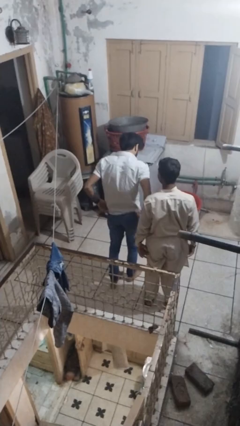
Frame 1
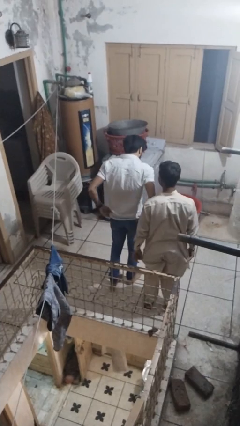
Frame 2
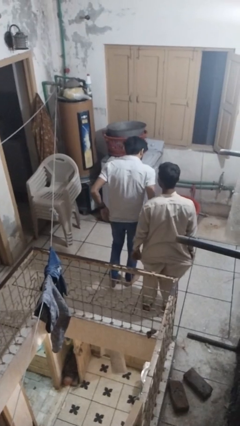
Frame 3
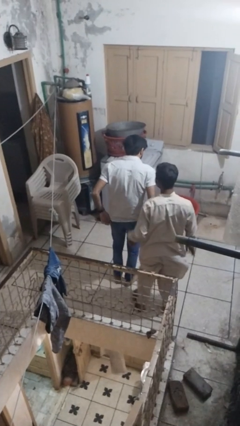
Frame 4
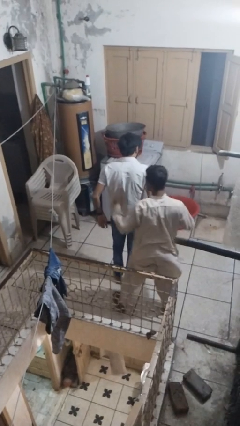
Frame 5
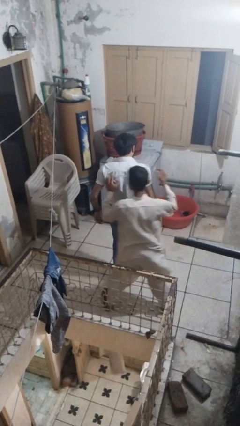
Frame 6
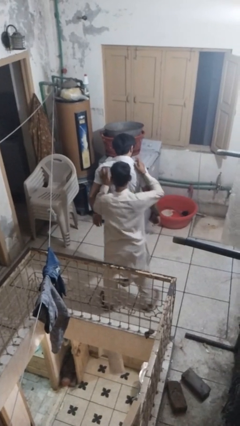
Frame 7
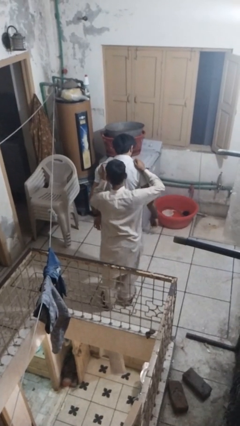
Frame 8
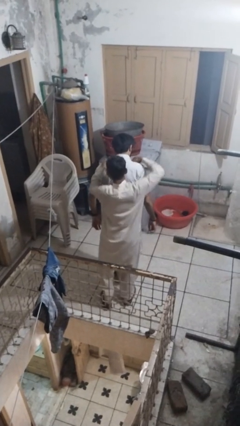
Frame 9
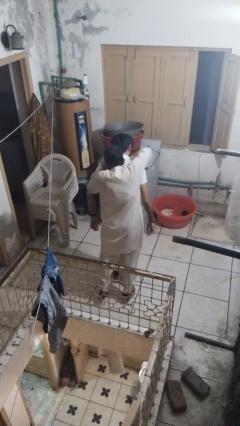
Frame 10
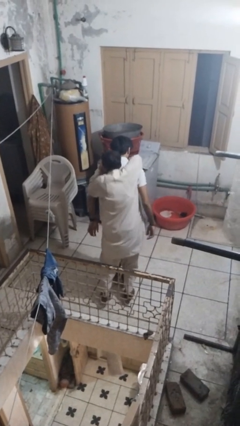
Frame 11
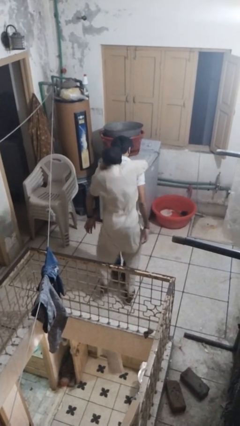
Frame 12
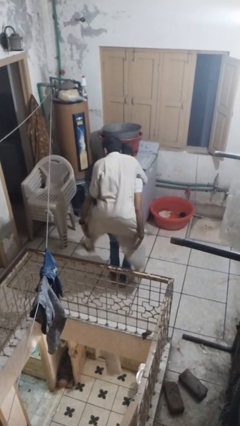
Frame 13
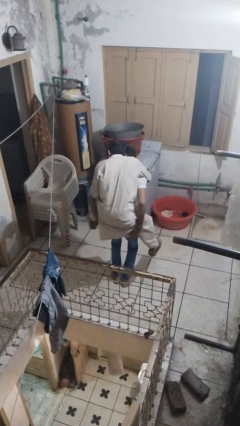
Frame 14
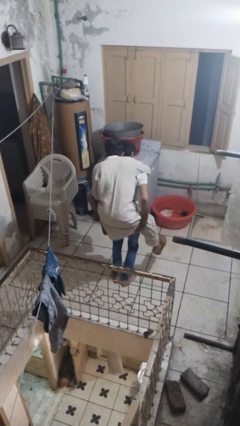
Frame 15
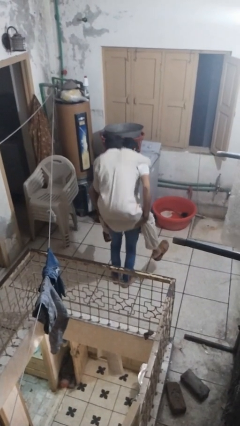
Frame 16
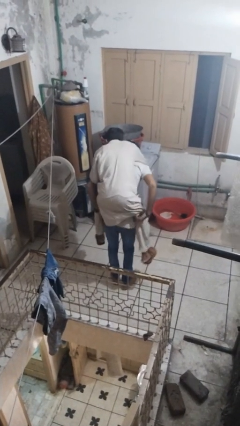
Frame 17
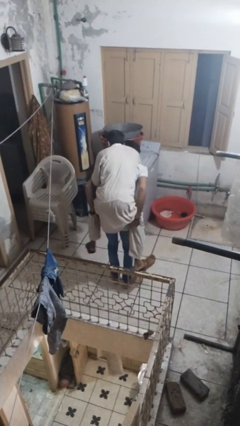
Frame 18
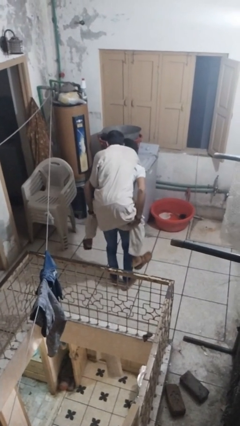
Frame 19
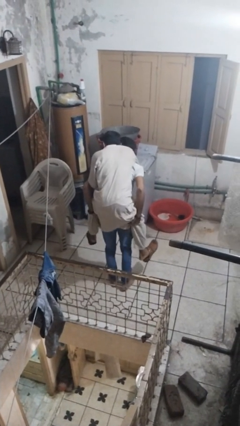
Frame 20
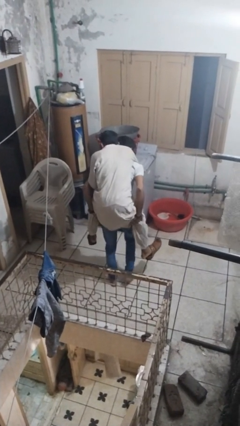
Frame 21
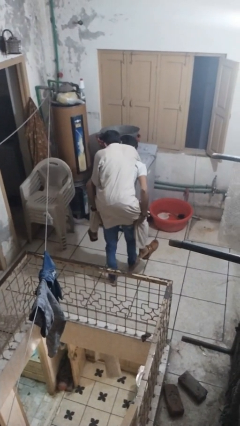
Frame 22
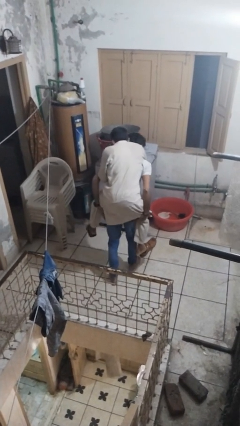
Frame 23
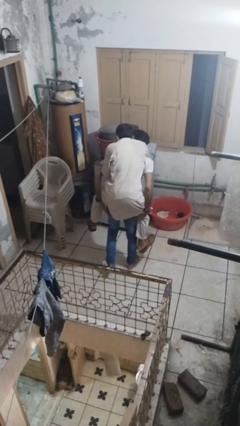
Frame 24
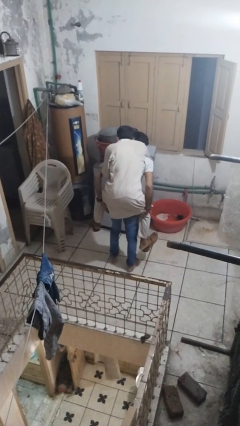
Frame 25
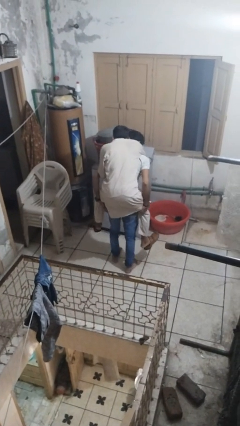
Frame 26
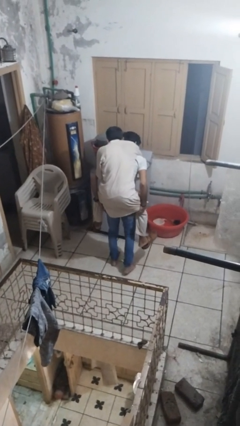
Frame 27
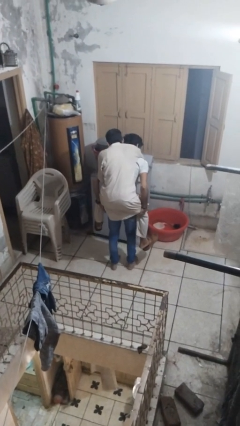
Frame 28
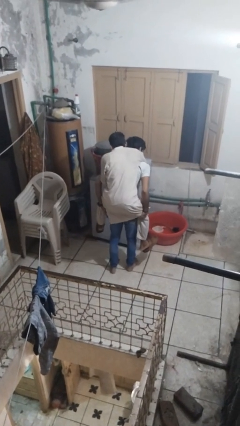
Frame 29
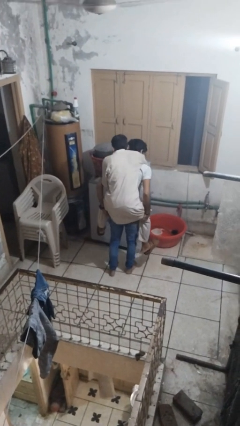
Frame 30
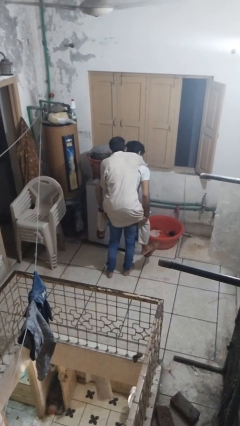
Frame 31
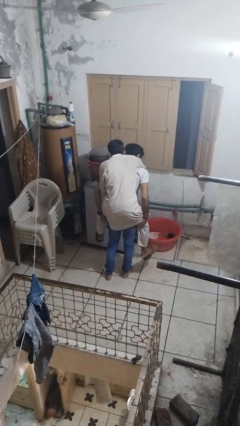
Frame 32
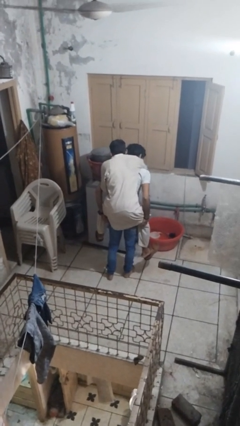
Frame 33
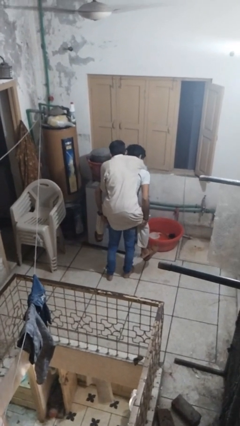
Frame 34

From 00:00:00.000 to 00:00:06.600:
person carries person on back

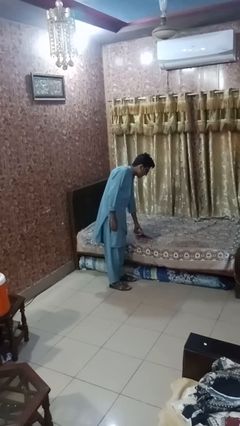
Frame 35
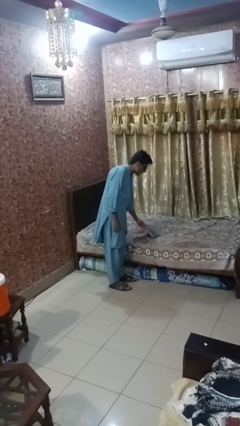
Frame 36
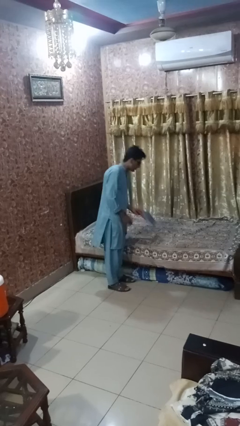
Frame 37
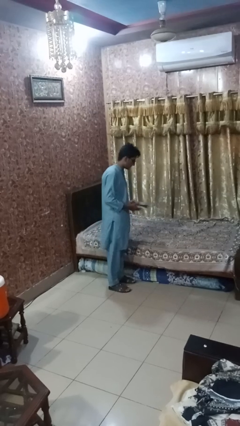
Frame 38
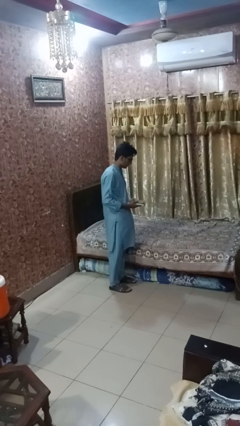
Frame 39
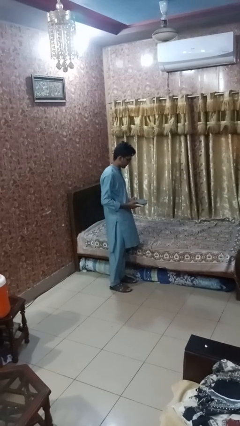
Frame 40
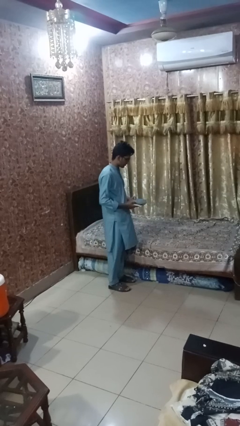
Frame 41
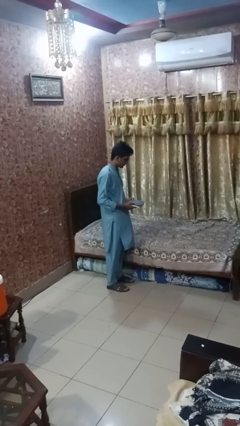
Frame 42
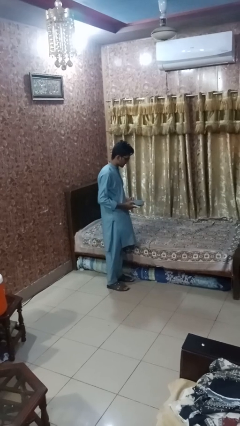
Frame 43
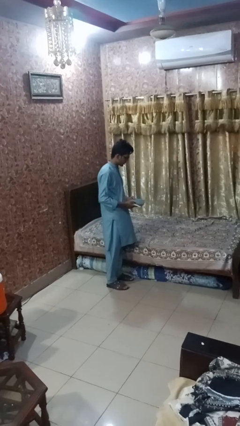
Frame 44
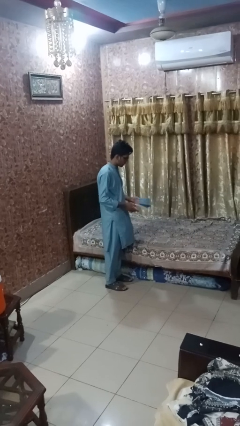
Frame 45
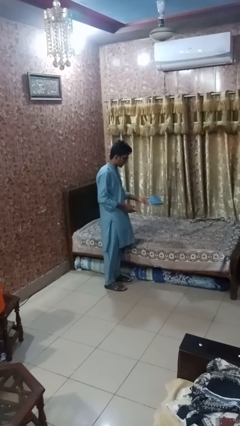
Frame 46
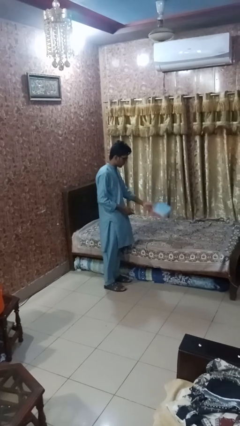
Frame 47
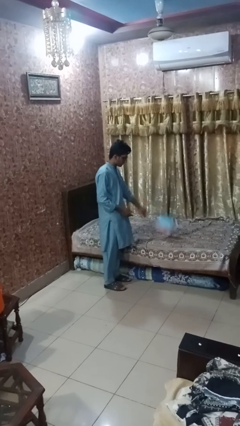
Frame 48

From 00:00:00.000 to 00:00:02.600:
person picks up object from bed

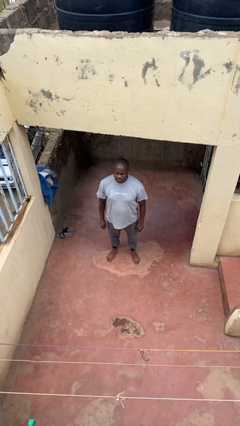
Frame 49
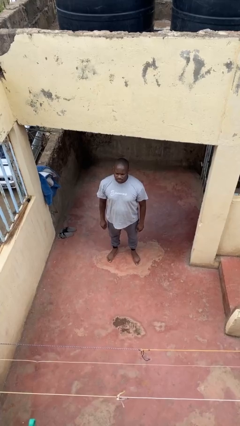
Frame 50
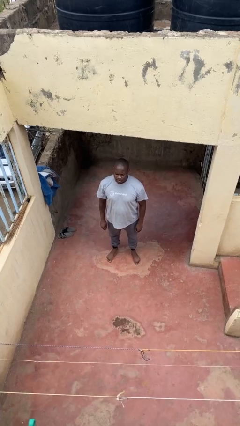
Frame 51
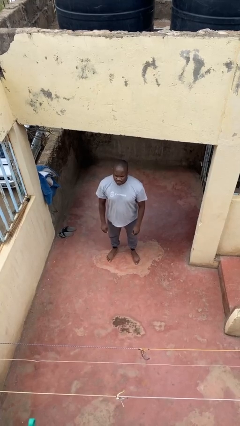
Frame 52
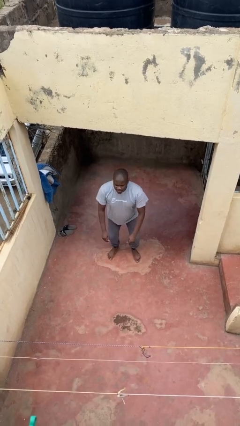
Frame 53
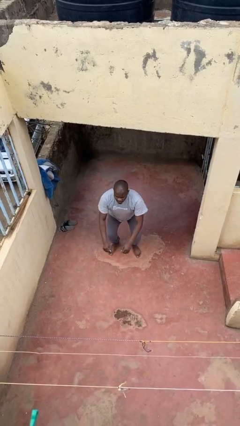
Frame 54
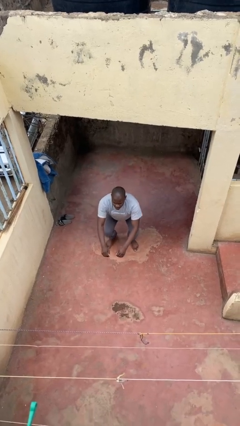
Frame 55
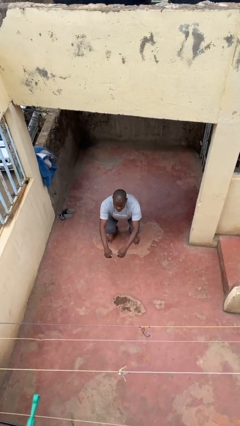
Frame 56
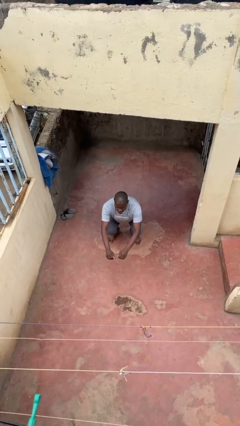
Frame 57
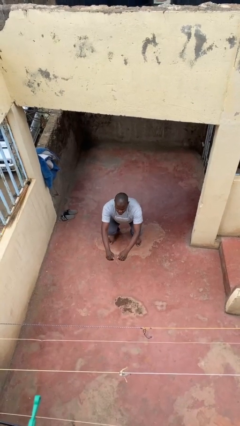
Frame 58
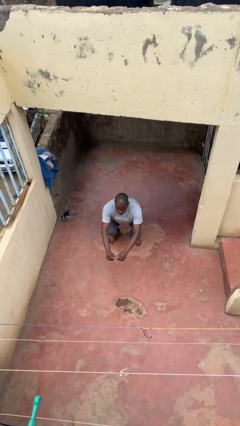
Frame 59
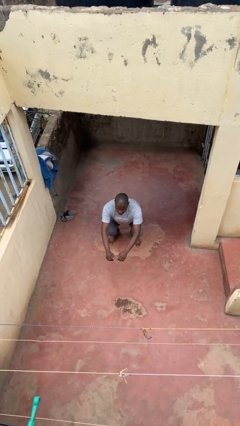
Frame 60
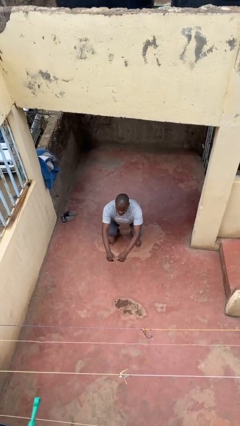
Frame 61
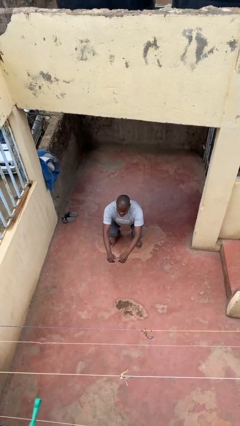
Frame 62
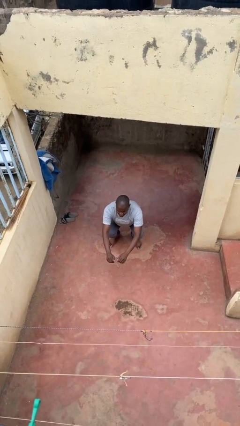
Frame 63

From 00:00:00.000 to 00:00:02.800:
person squats

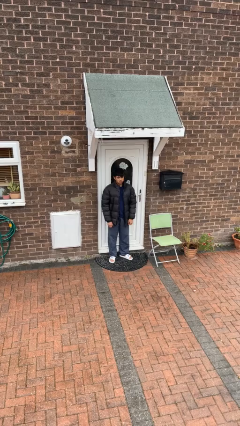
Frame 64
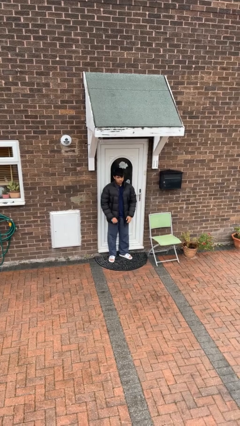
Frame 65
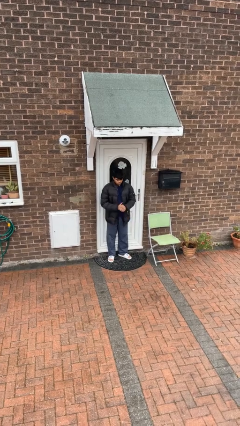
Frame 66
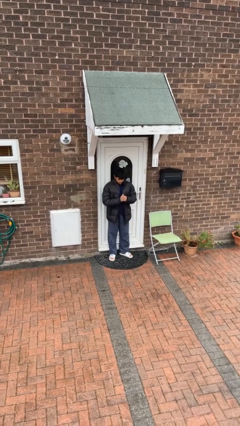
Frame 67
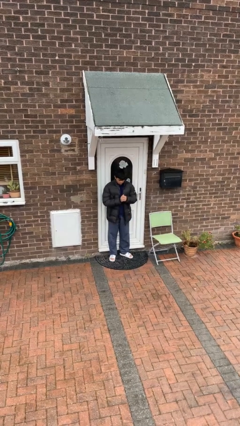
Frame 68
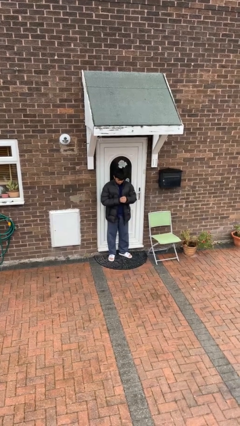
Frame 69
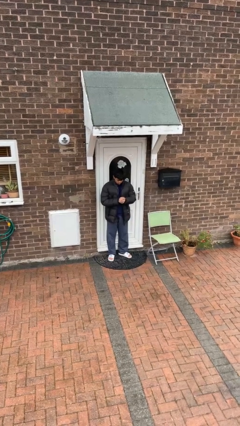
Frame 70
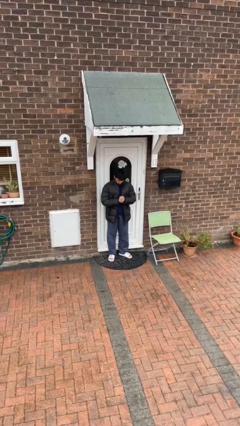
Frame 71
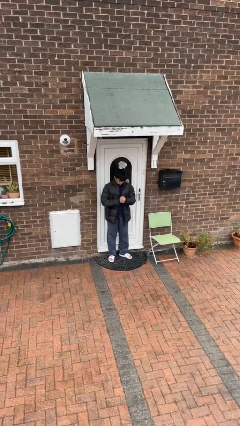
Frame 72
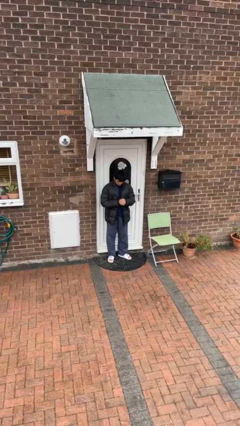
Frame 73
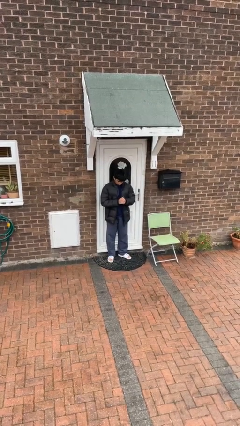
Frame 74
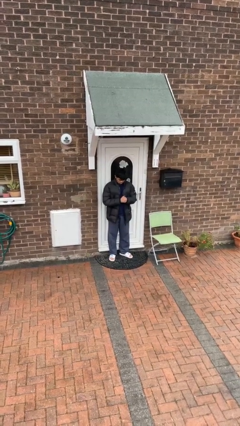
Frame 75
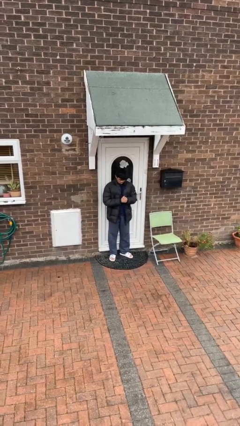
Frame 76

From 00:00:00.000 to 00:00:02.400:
person cracks knuckles

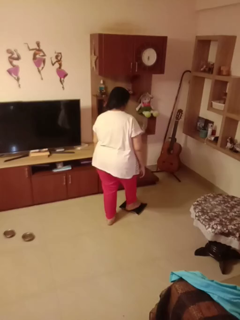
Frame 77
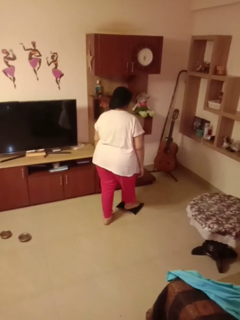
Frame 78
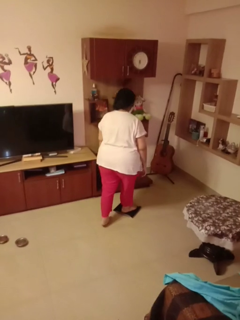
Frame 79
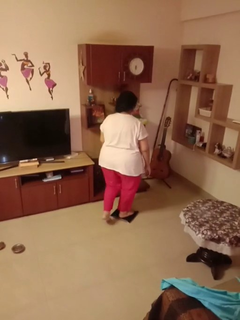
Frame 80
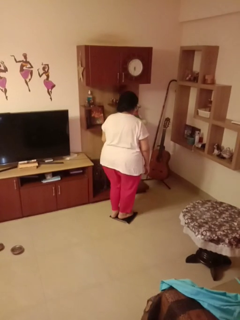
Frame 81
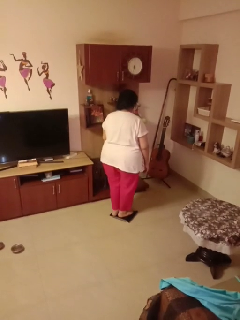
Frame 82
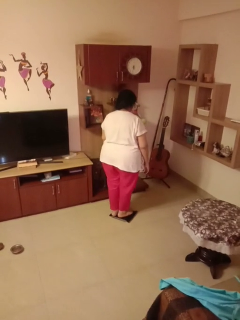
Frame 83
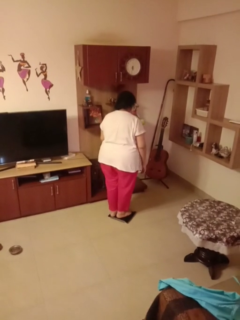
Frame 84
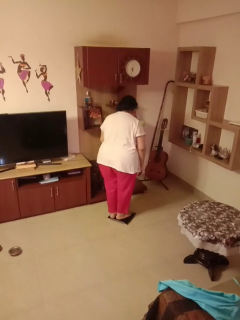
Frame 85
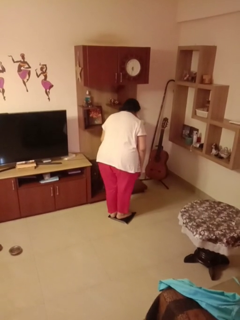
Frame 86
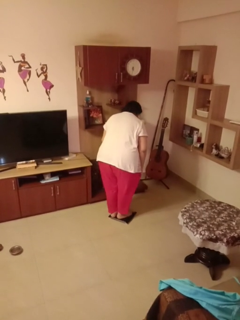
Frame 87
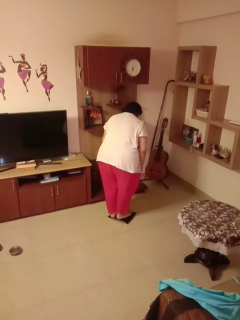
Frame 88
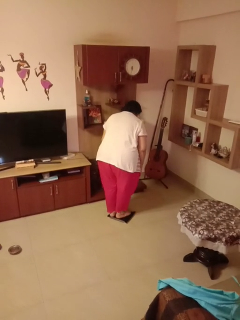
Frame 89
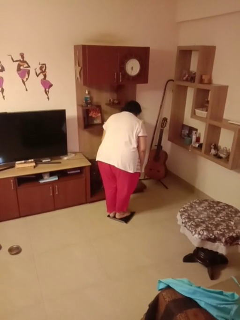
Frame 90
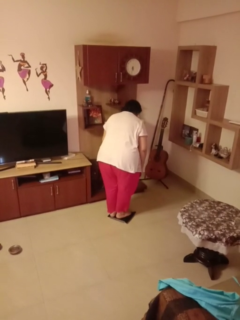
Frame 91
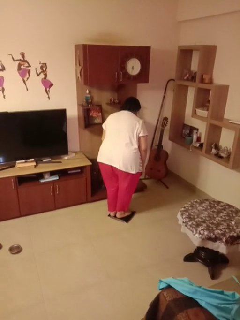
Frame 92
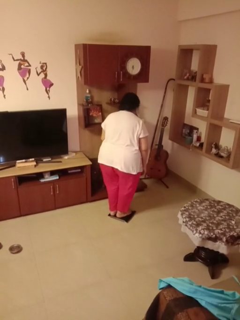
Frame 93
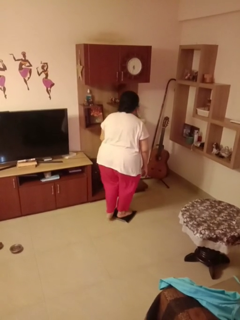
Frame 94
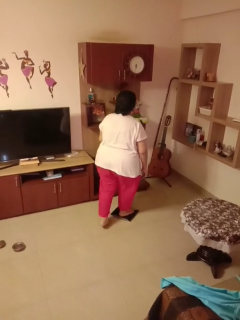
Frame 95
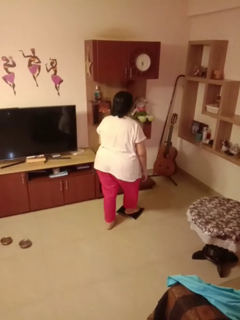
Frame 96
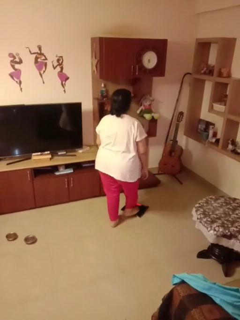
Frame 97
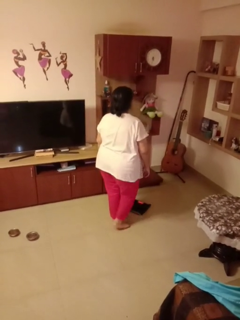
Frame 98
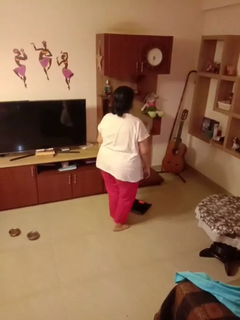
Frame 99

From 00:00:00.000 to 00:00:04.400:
person uses bodyweight scale
